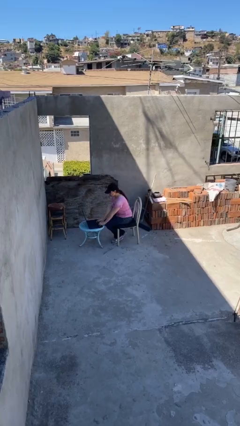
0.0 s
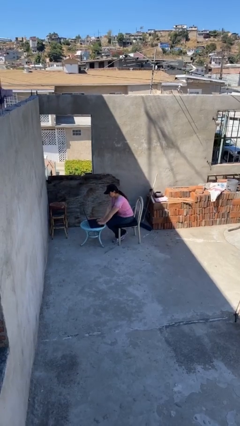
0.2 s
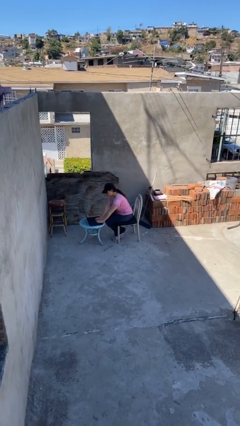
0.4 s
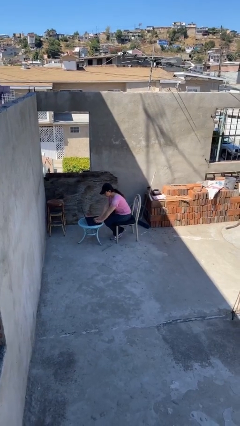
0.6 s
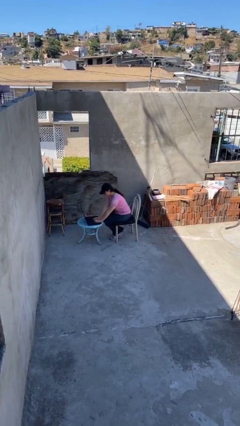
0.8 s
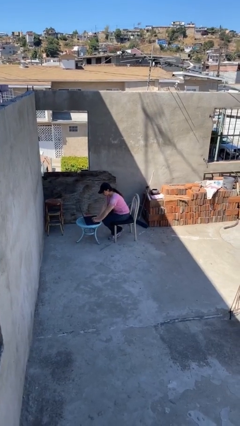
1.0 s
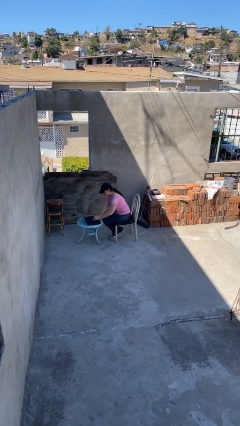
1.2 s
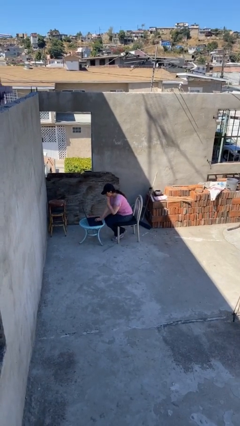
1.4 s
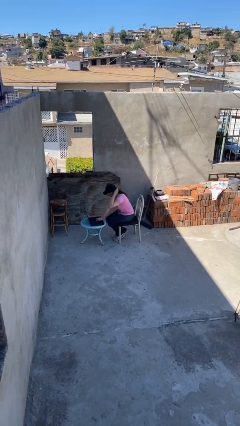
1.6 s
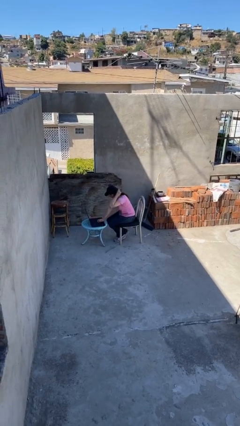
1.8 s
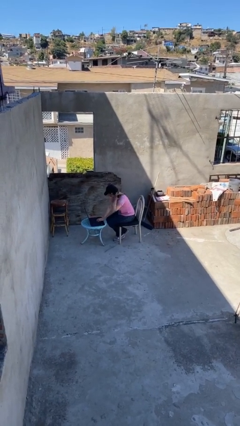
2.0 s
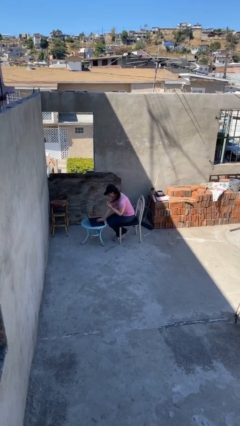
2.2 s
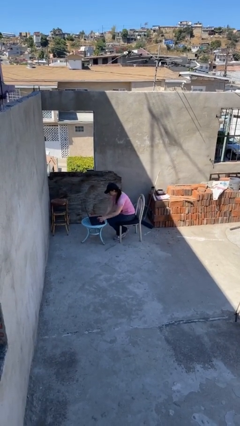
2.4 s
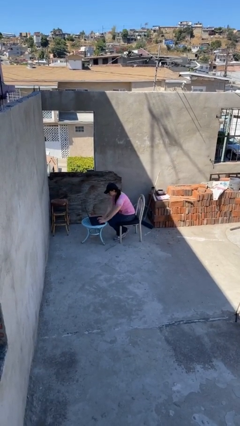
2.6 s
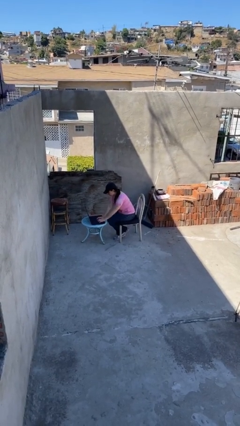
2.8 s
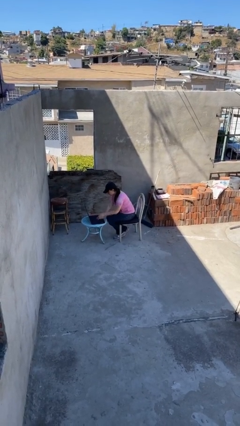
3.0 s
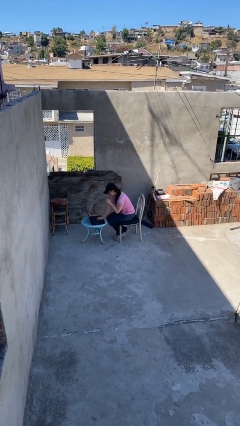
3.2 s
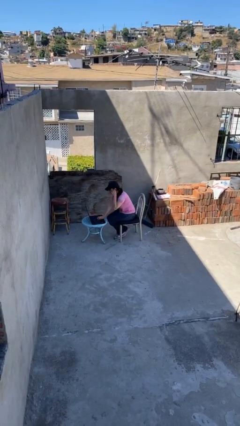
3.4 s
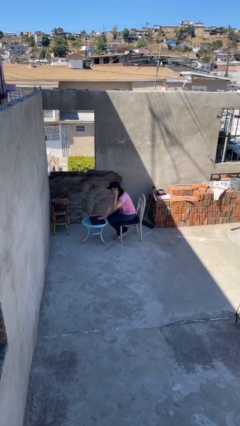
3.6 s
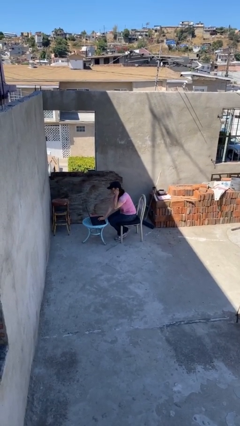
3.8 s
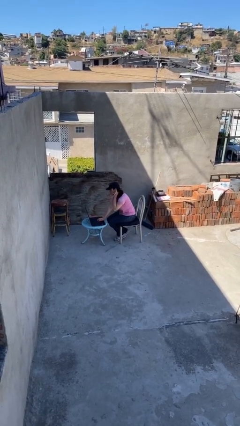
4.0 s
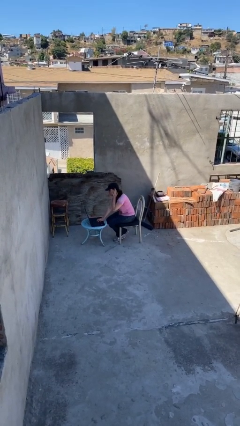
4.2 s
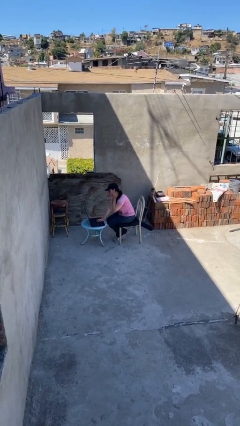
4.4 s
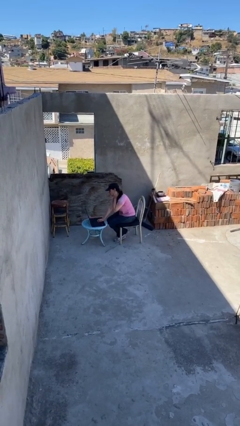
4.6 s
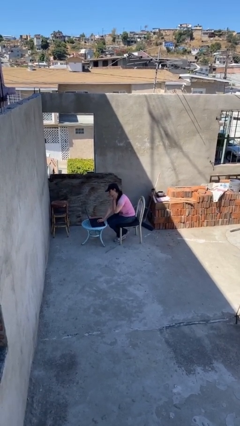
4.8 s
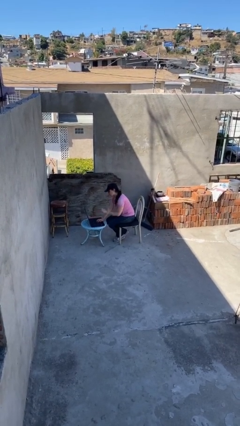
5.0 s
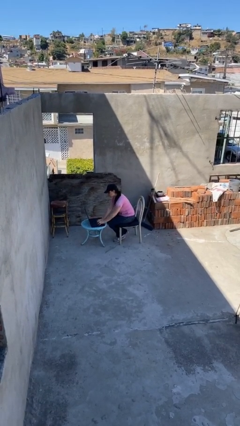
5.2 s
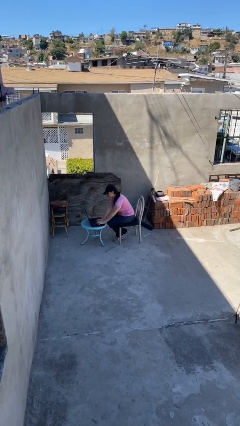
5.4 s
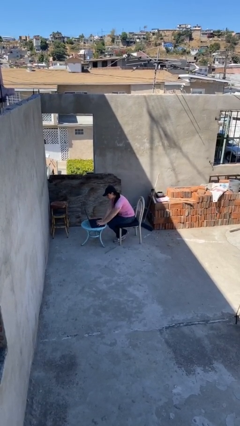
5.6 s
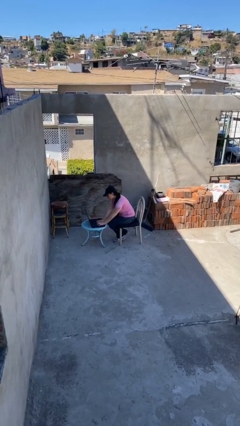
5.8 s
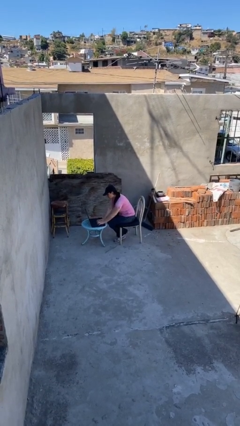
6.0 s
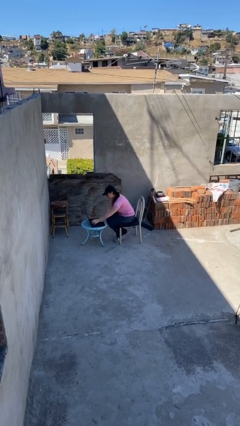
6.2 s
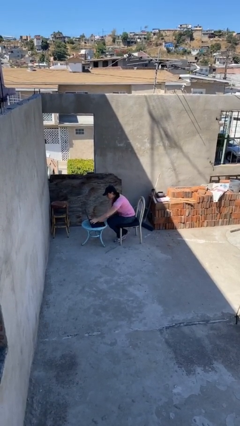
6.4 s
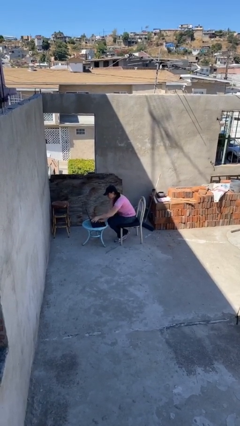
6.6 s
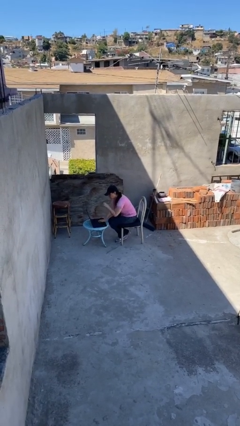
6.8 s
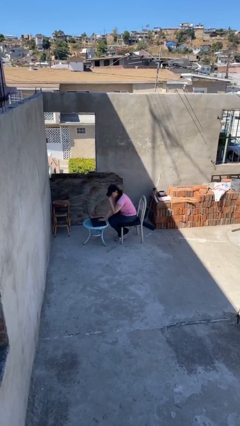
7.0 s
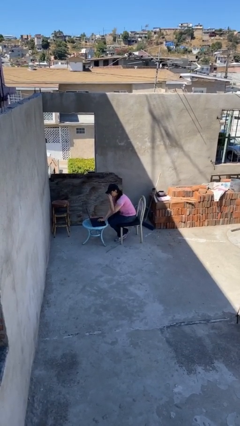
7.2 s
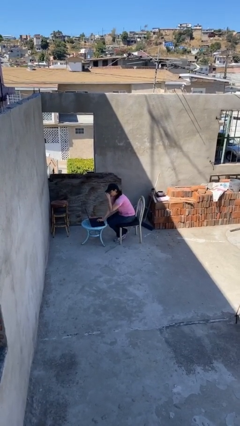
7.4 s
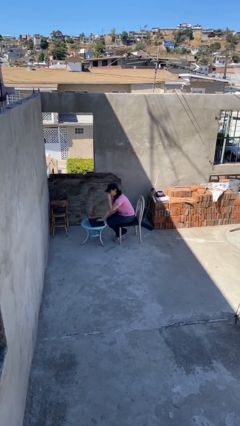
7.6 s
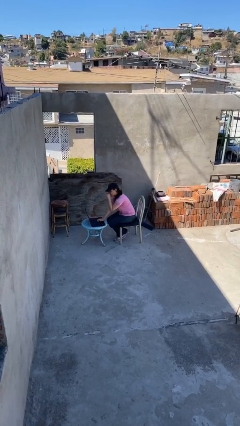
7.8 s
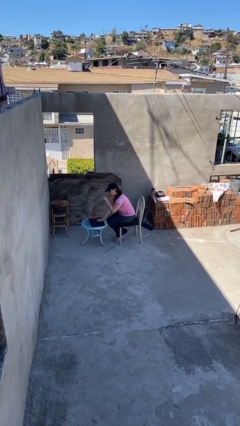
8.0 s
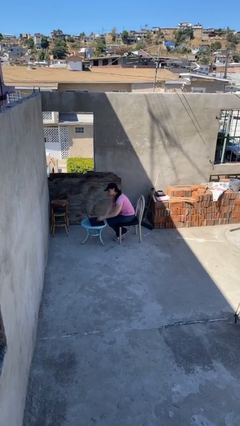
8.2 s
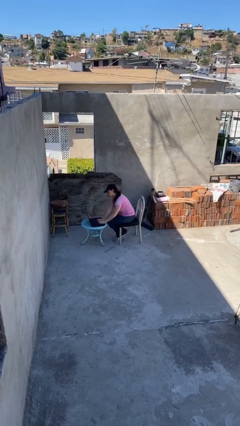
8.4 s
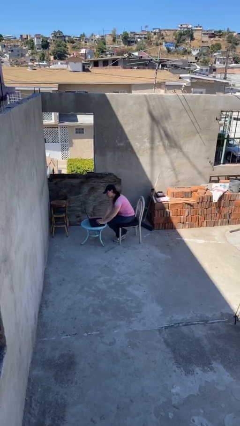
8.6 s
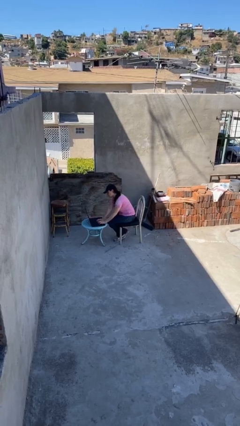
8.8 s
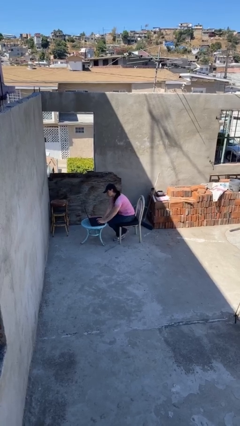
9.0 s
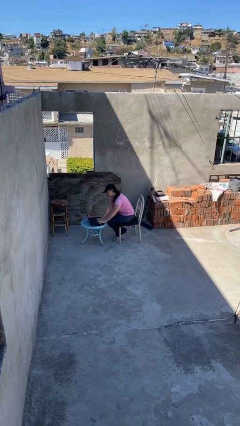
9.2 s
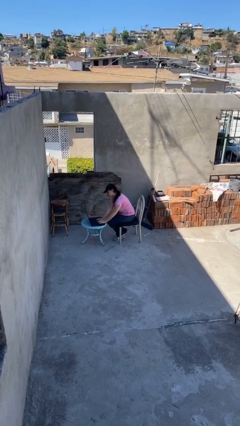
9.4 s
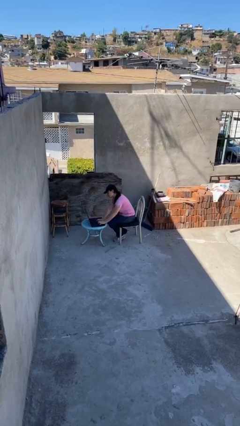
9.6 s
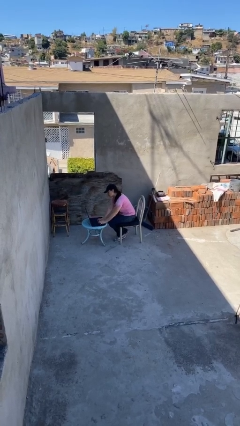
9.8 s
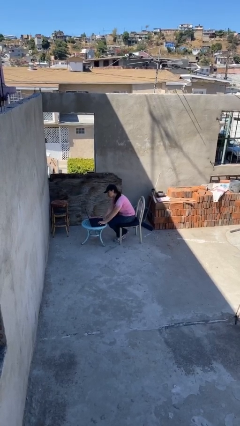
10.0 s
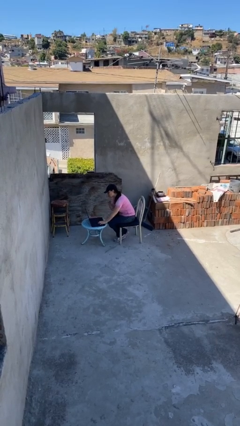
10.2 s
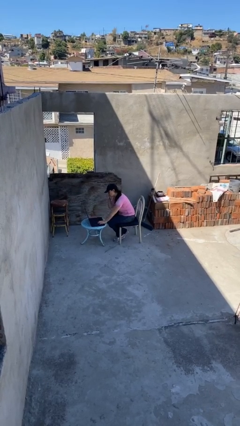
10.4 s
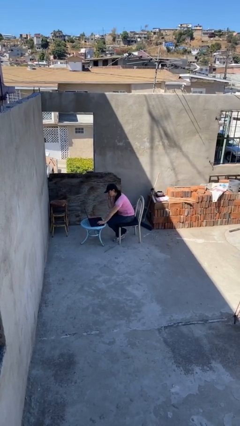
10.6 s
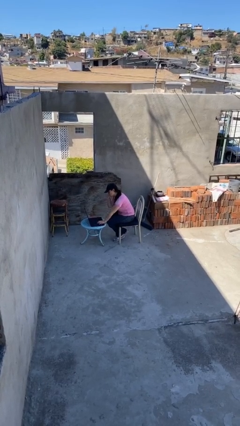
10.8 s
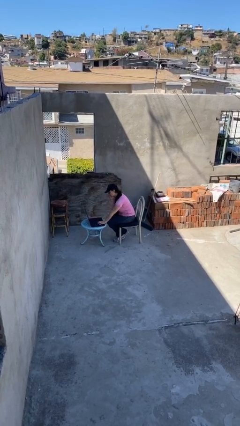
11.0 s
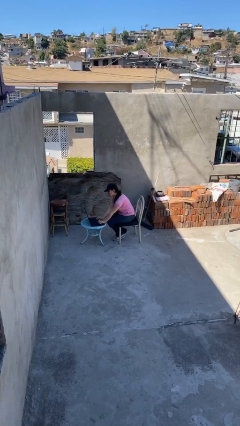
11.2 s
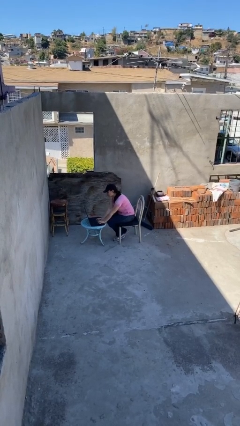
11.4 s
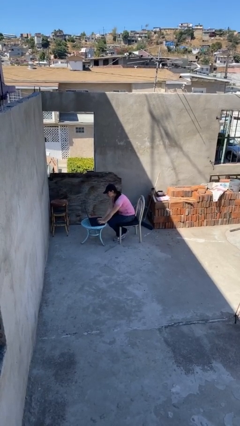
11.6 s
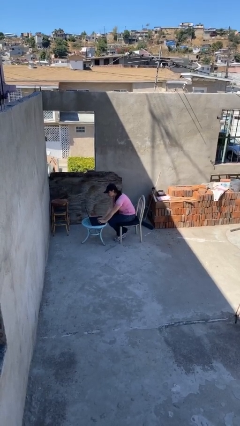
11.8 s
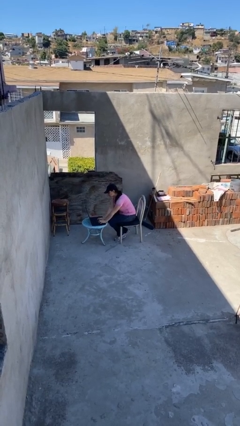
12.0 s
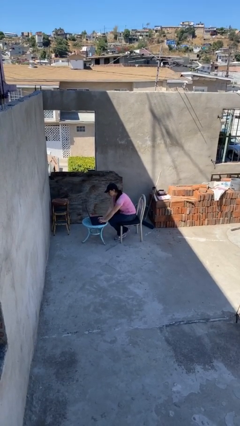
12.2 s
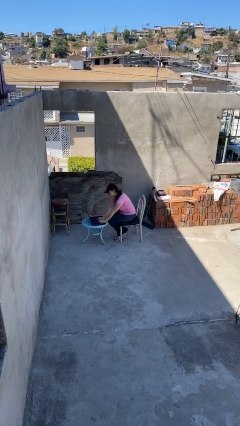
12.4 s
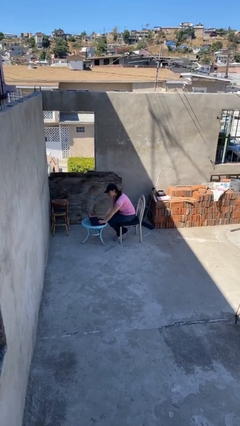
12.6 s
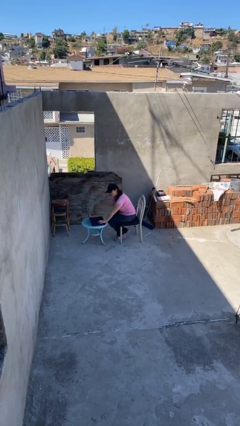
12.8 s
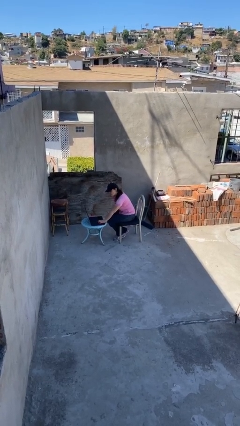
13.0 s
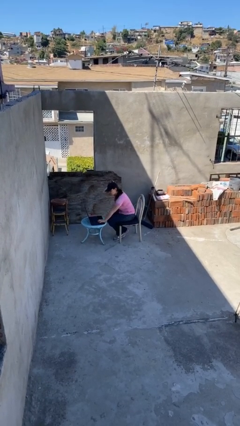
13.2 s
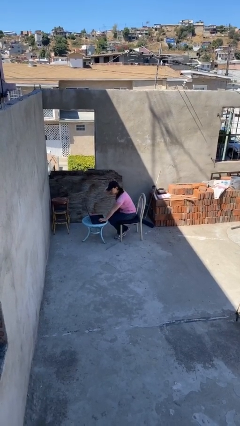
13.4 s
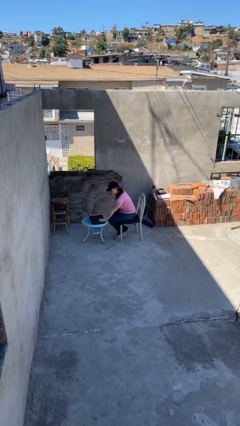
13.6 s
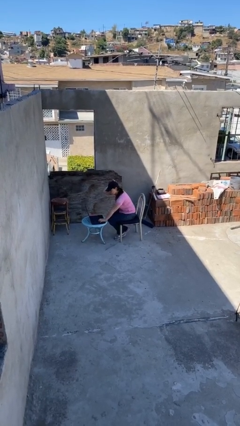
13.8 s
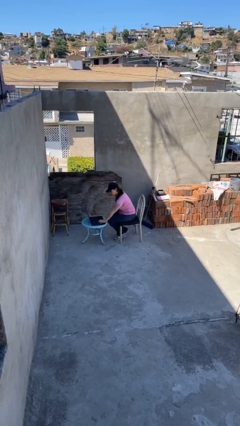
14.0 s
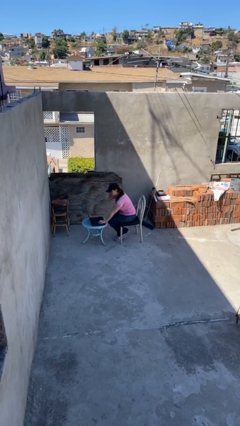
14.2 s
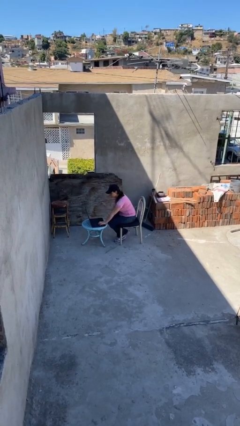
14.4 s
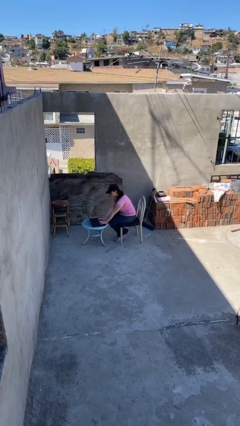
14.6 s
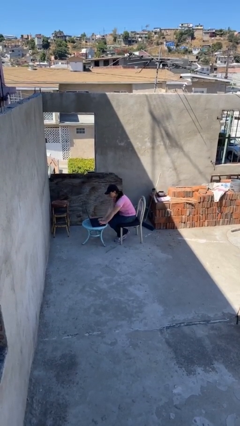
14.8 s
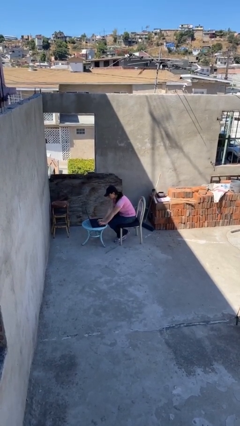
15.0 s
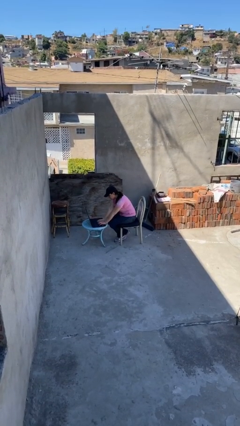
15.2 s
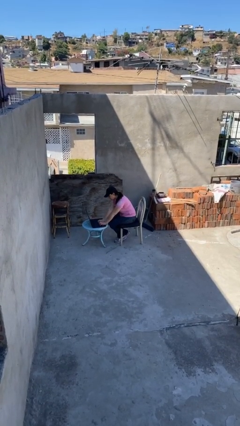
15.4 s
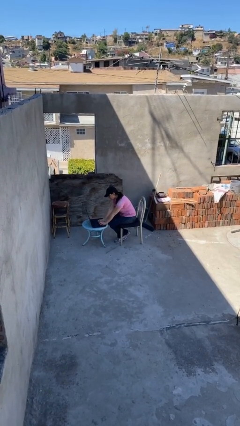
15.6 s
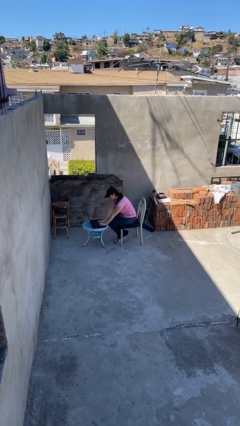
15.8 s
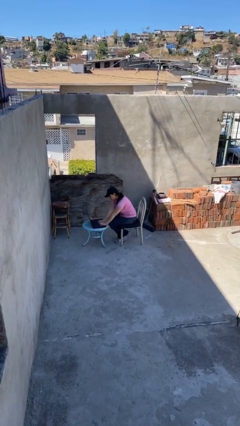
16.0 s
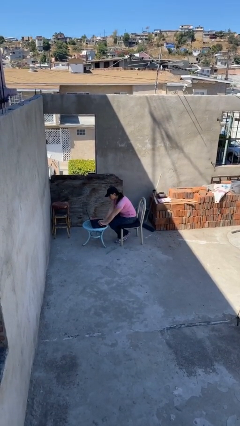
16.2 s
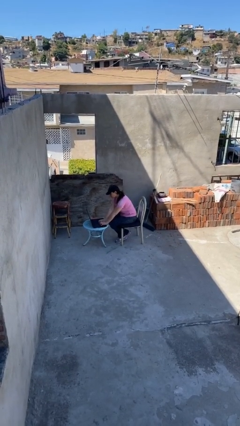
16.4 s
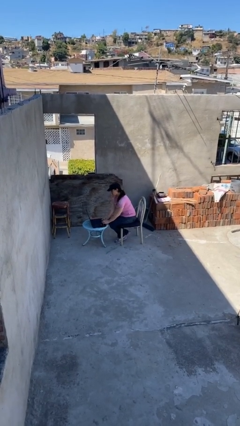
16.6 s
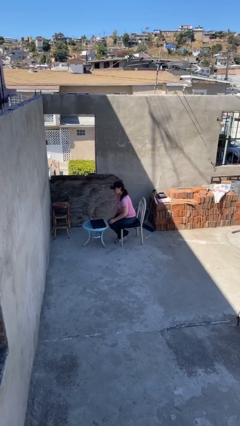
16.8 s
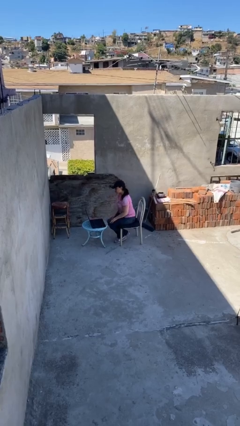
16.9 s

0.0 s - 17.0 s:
person interacts with laptop

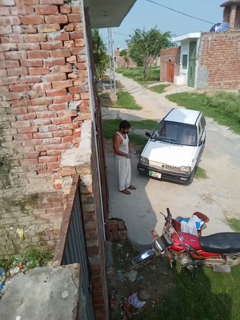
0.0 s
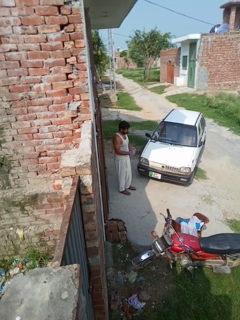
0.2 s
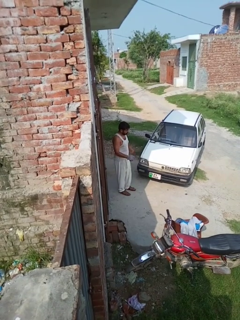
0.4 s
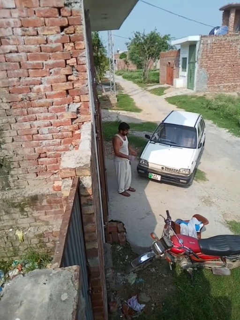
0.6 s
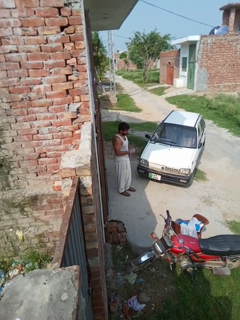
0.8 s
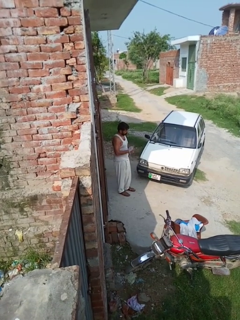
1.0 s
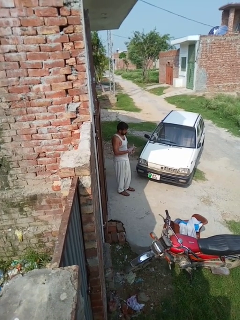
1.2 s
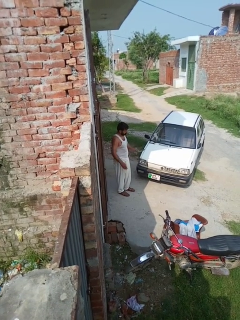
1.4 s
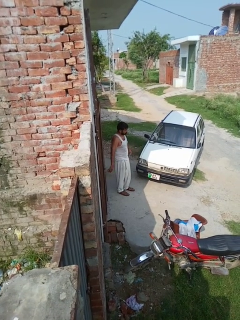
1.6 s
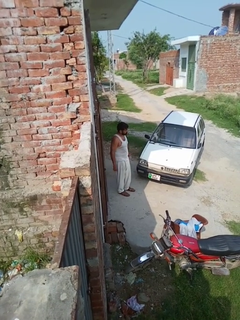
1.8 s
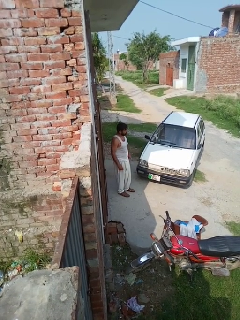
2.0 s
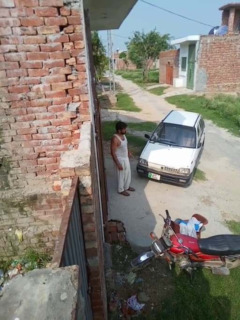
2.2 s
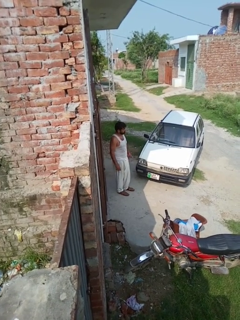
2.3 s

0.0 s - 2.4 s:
person takes off gloves
